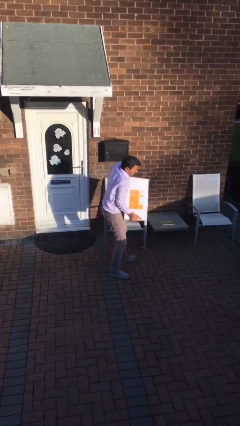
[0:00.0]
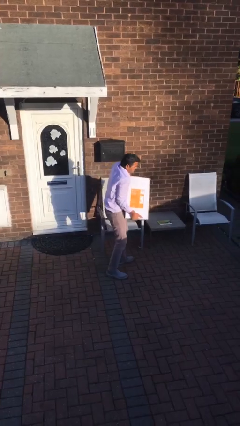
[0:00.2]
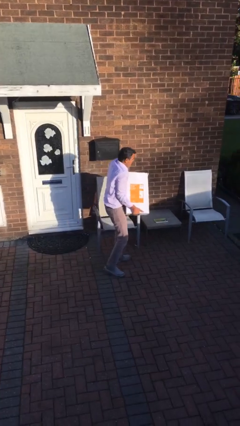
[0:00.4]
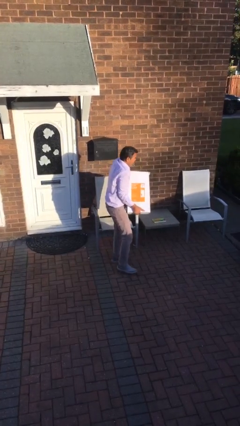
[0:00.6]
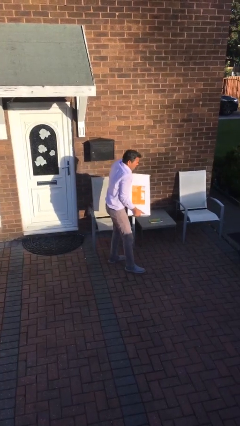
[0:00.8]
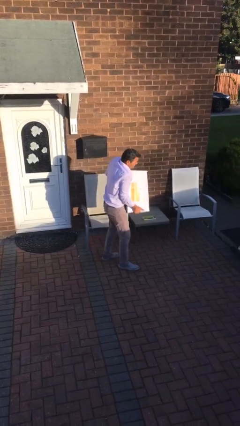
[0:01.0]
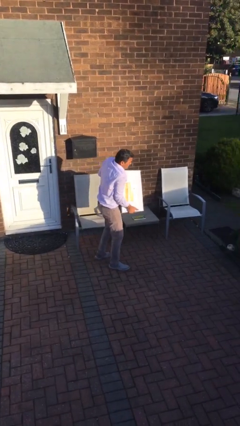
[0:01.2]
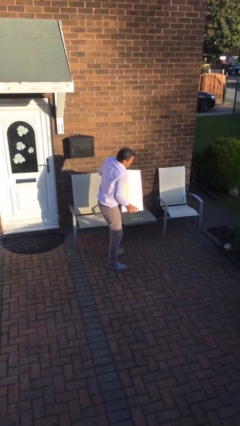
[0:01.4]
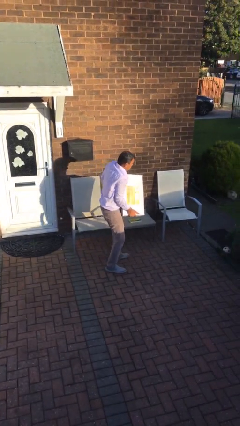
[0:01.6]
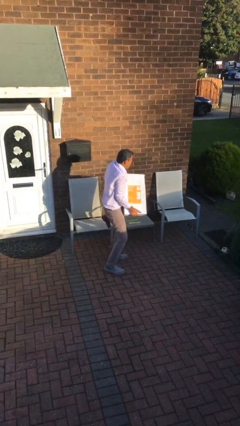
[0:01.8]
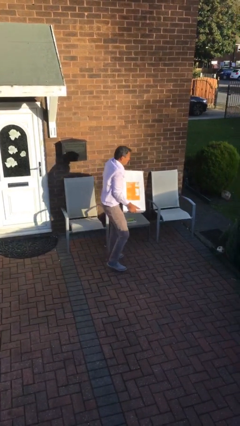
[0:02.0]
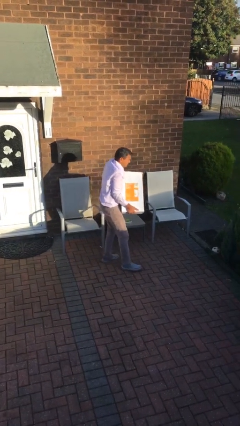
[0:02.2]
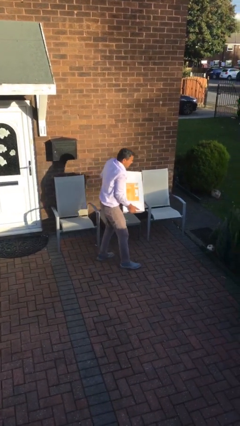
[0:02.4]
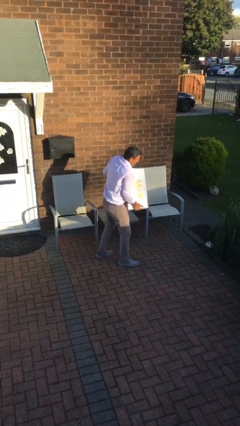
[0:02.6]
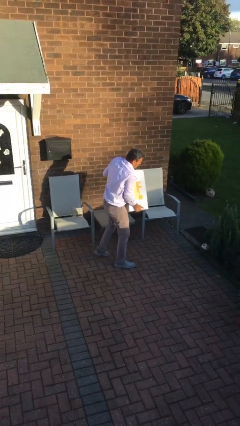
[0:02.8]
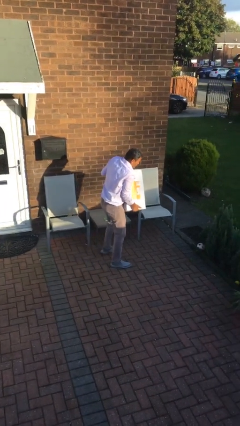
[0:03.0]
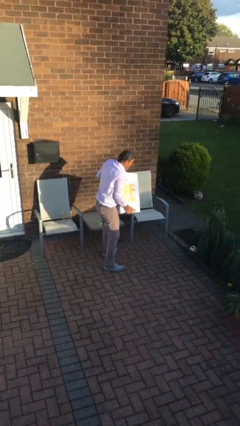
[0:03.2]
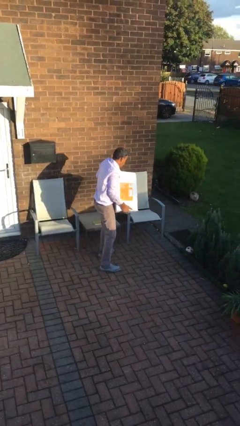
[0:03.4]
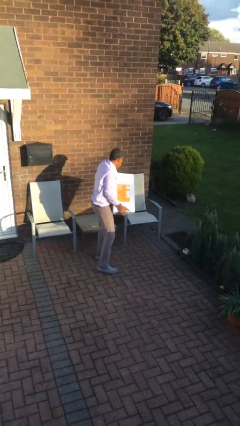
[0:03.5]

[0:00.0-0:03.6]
person carries heavy object

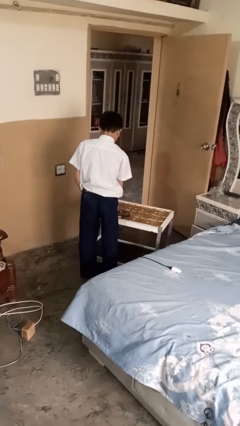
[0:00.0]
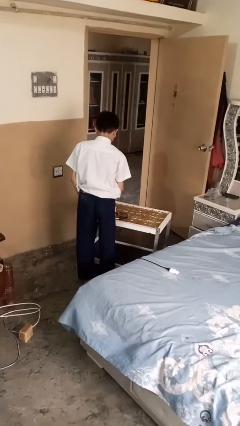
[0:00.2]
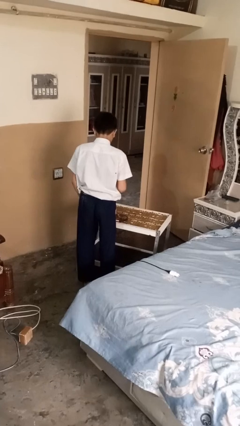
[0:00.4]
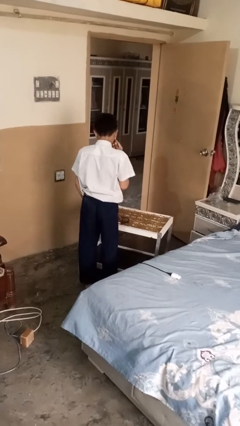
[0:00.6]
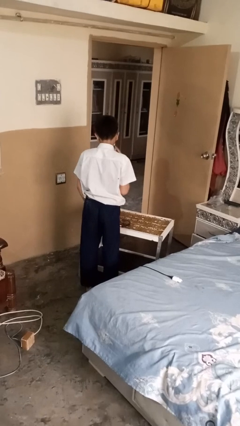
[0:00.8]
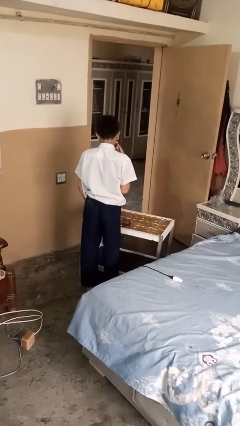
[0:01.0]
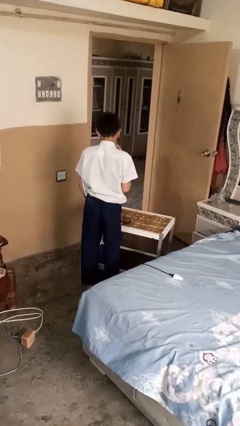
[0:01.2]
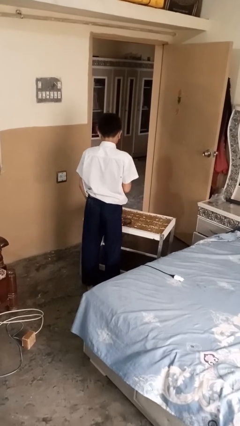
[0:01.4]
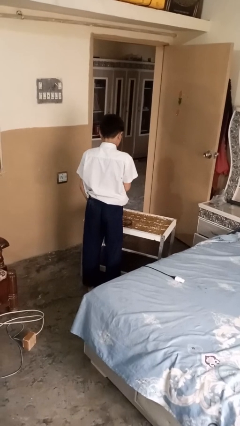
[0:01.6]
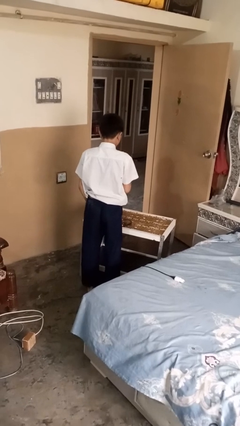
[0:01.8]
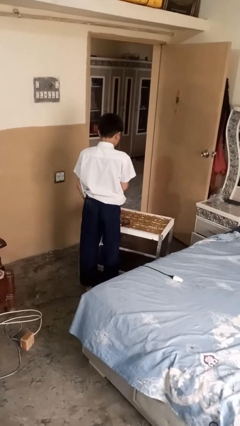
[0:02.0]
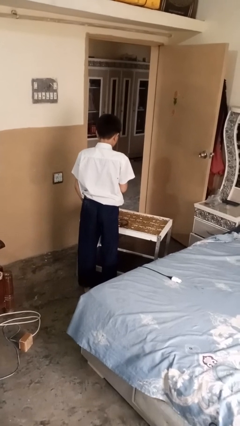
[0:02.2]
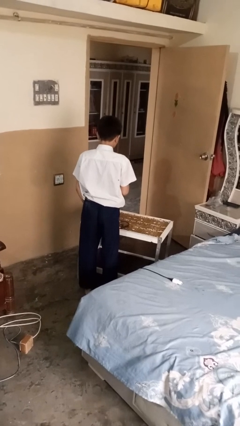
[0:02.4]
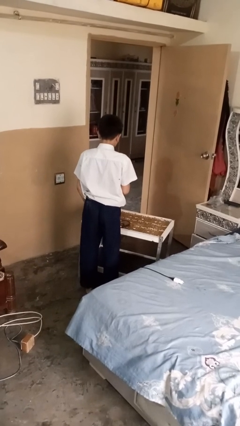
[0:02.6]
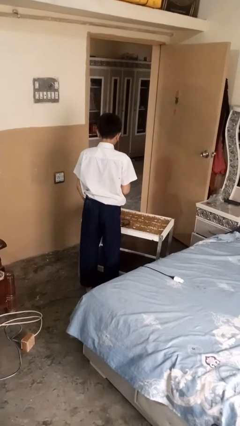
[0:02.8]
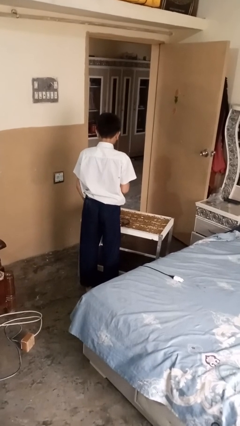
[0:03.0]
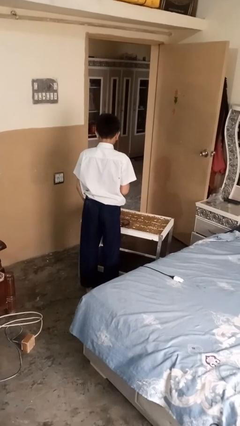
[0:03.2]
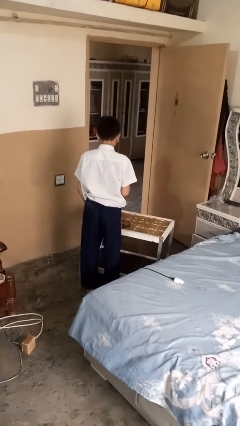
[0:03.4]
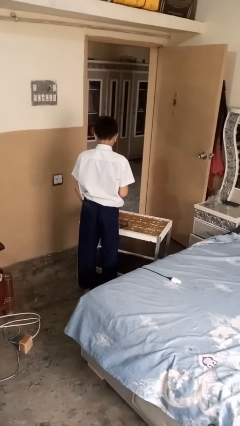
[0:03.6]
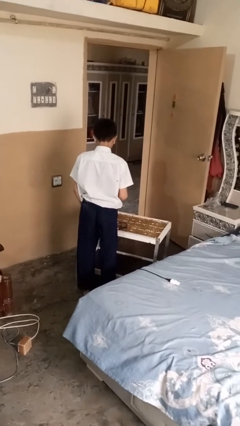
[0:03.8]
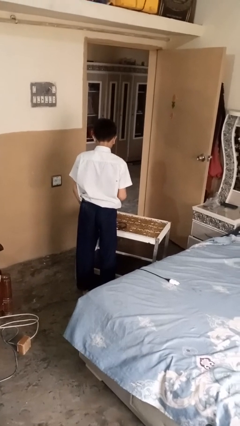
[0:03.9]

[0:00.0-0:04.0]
person shaves face

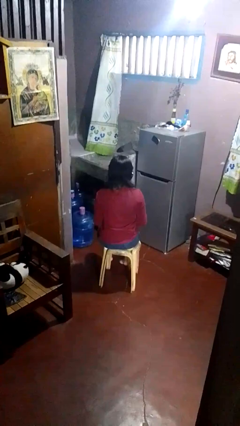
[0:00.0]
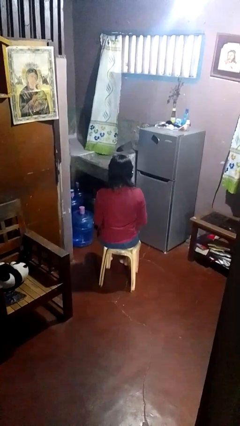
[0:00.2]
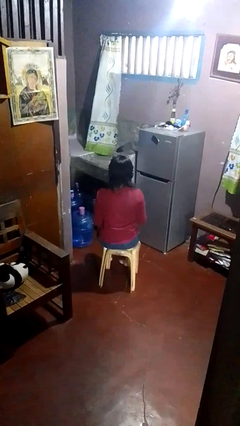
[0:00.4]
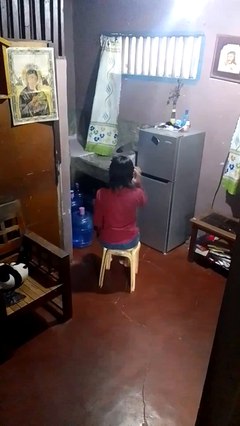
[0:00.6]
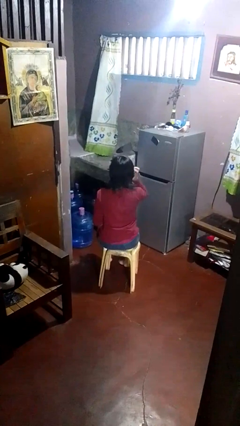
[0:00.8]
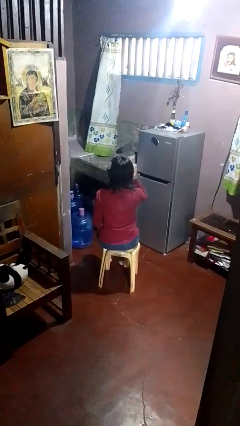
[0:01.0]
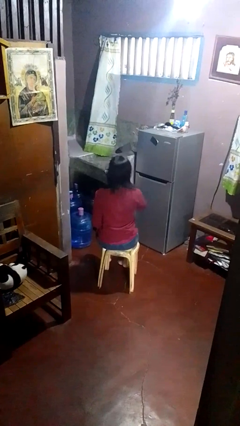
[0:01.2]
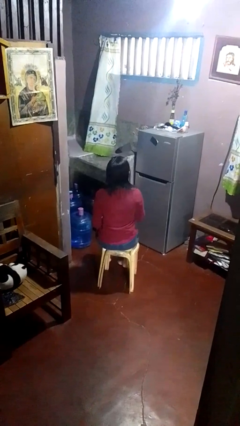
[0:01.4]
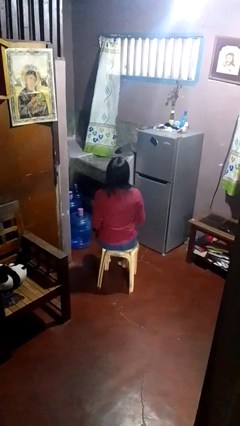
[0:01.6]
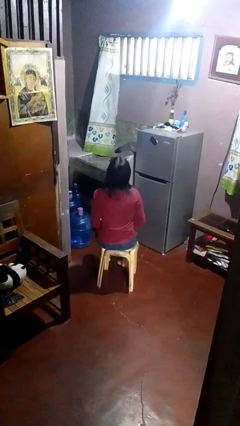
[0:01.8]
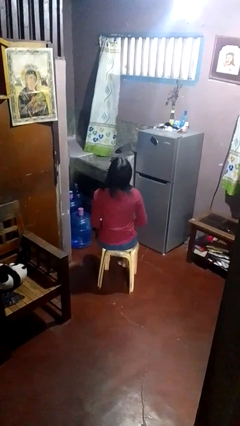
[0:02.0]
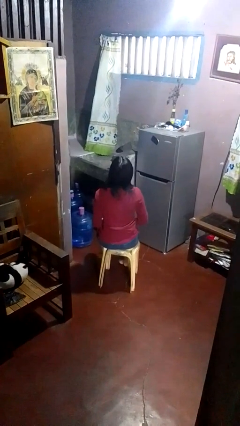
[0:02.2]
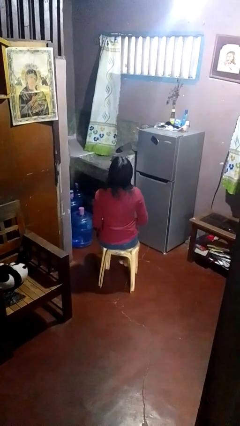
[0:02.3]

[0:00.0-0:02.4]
person takes off headphones

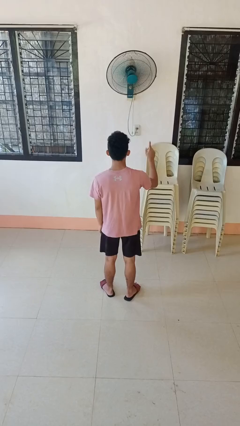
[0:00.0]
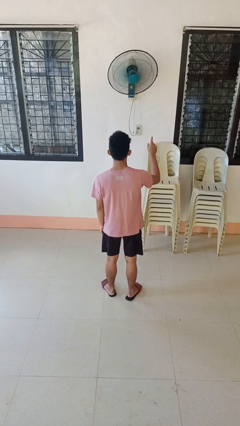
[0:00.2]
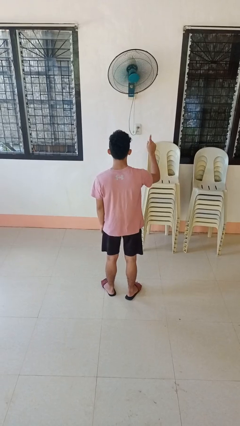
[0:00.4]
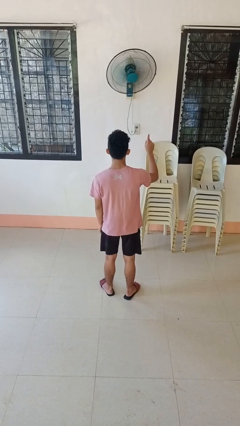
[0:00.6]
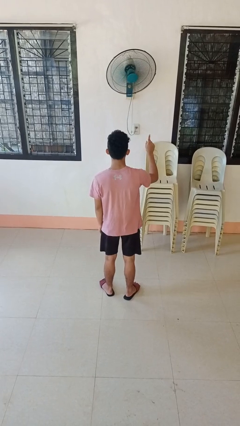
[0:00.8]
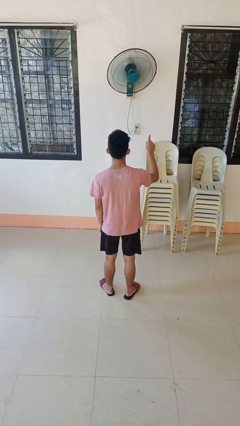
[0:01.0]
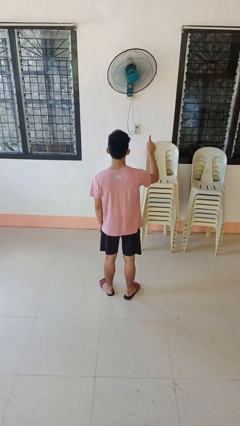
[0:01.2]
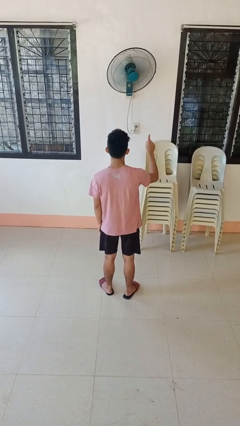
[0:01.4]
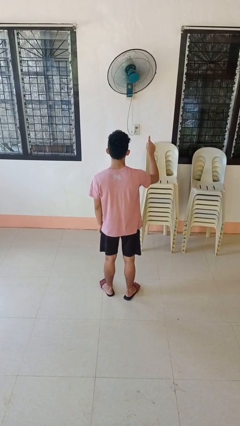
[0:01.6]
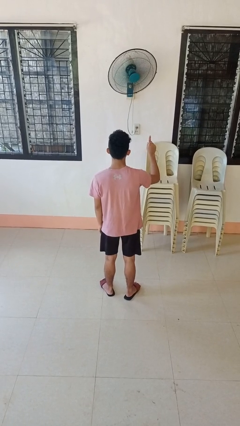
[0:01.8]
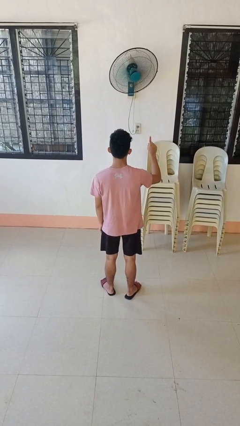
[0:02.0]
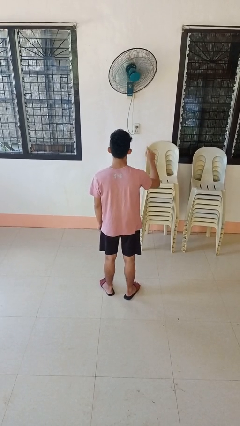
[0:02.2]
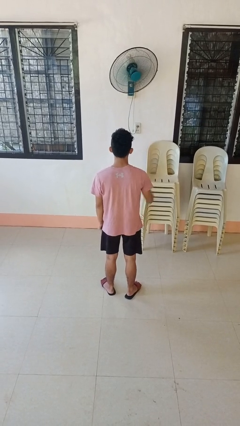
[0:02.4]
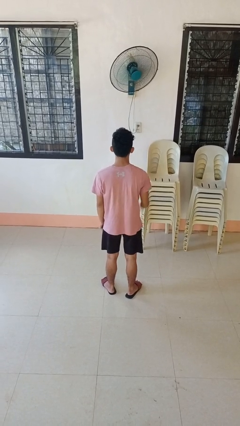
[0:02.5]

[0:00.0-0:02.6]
person gestures number one

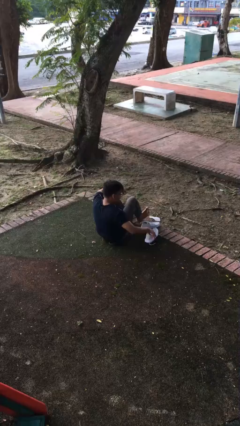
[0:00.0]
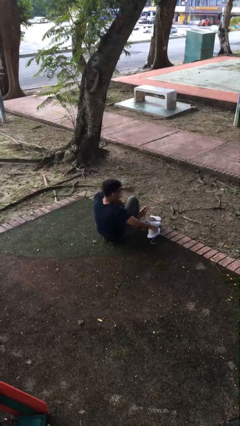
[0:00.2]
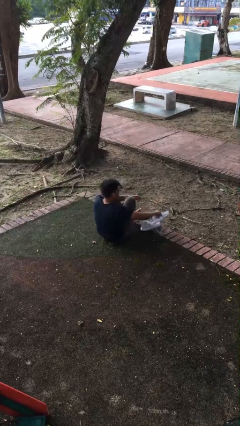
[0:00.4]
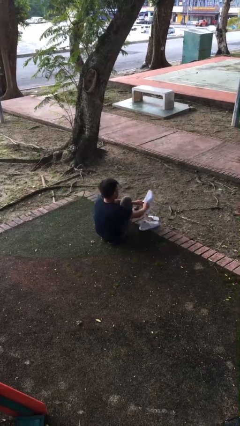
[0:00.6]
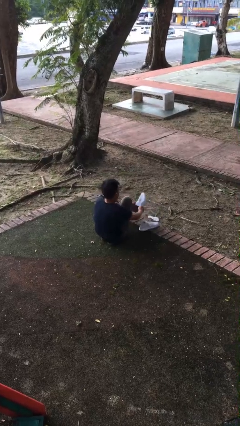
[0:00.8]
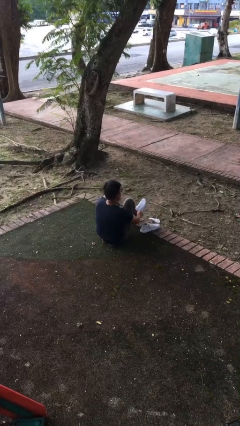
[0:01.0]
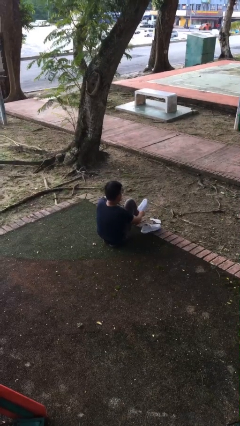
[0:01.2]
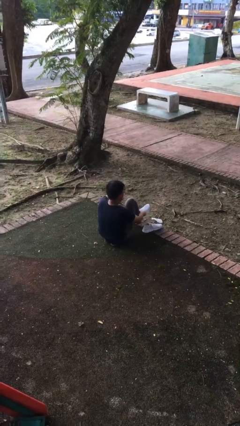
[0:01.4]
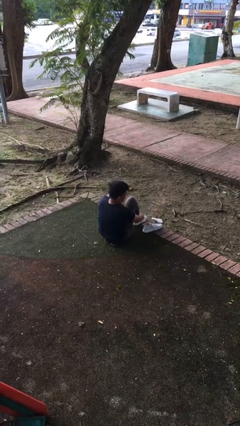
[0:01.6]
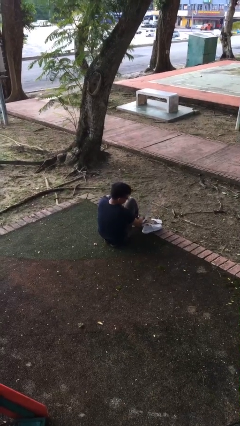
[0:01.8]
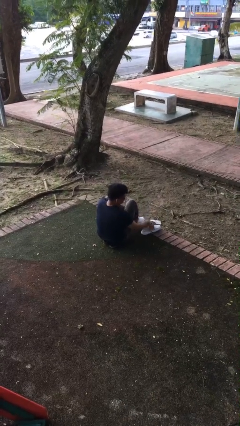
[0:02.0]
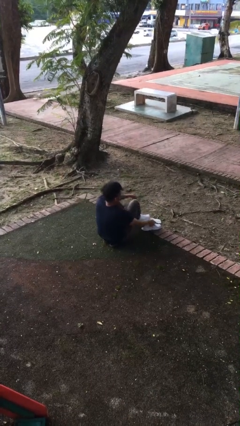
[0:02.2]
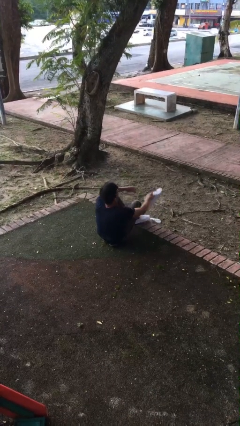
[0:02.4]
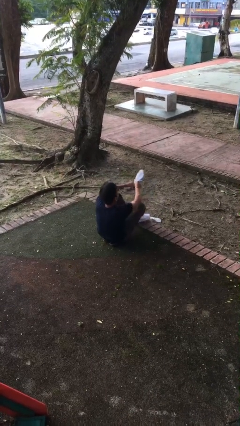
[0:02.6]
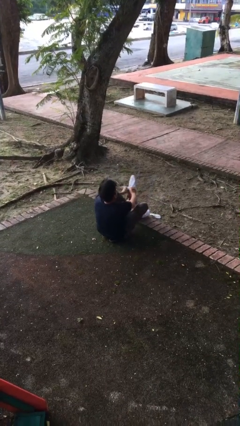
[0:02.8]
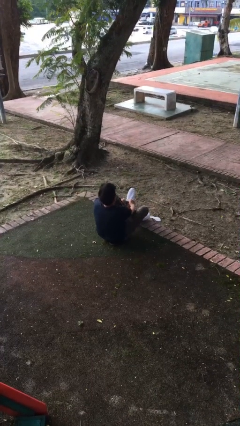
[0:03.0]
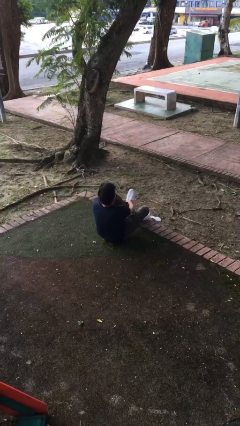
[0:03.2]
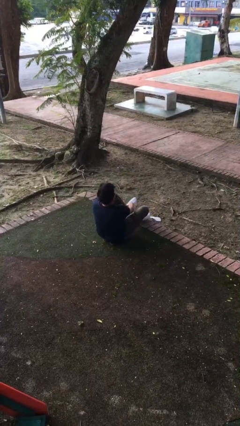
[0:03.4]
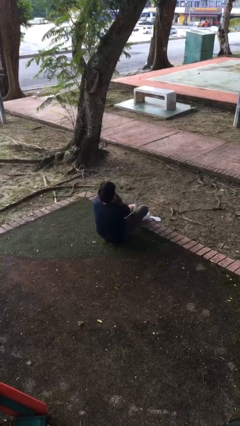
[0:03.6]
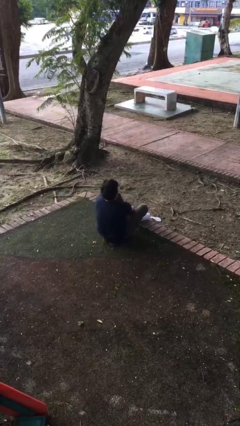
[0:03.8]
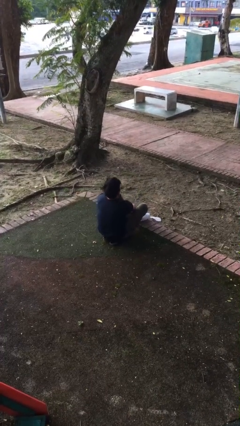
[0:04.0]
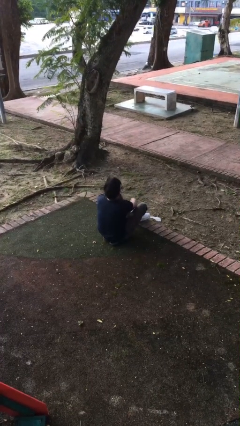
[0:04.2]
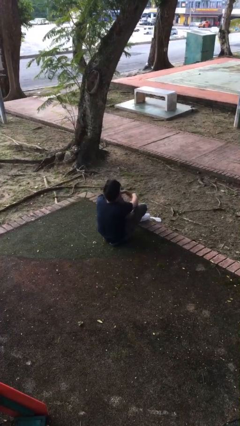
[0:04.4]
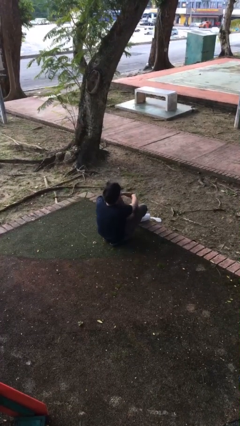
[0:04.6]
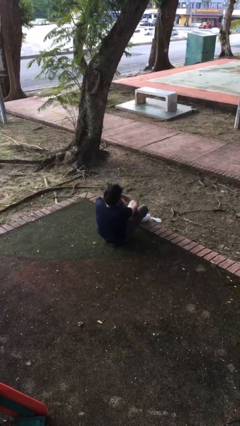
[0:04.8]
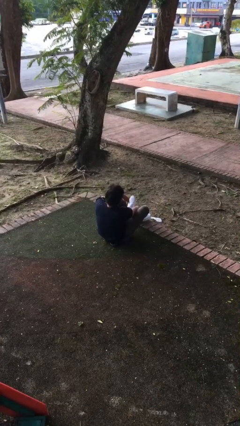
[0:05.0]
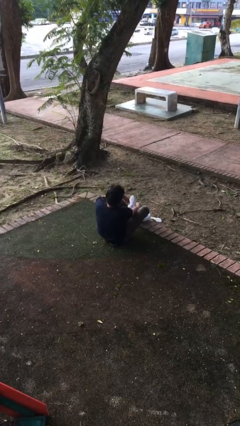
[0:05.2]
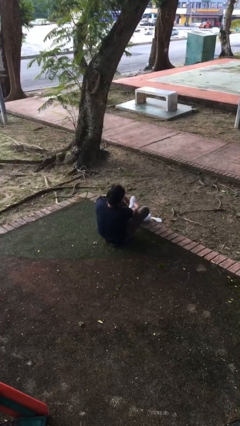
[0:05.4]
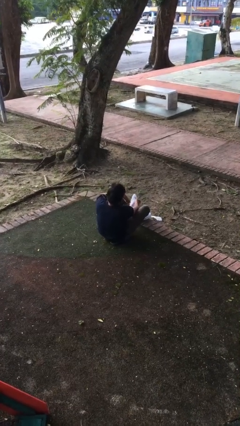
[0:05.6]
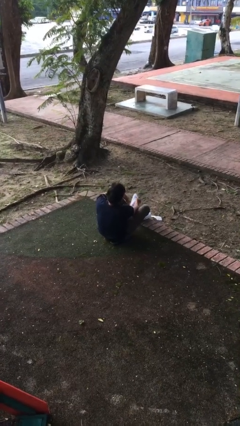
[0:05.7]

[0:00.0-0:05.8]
person puts on shoes
